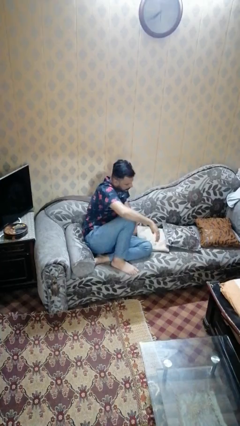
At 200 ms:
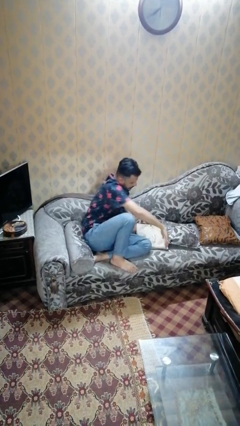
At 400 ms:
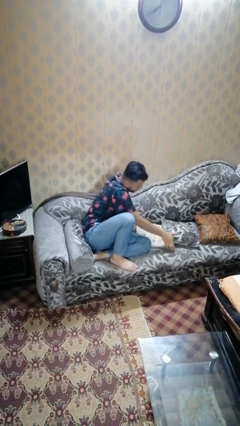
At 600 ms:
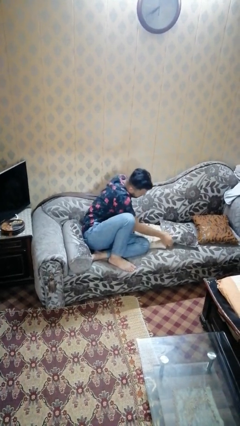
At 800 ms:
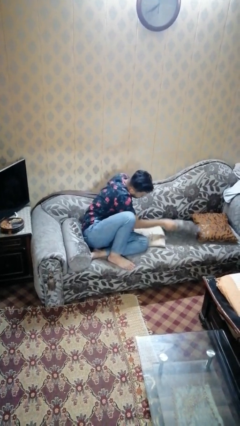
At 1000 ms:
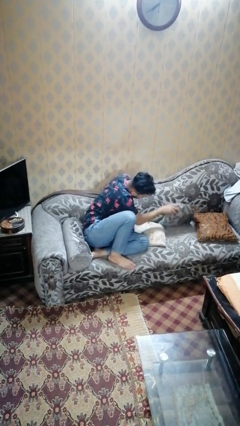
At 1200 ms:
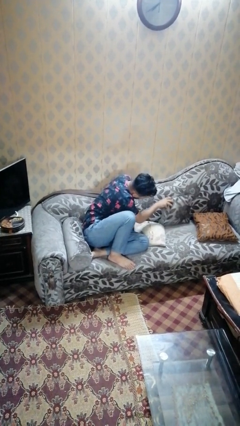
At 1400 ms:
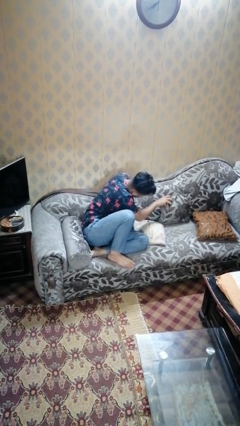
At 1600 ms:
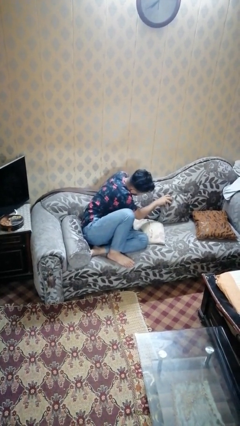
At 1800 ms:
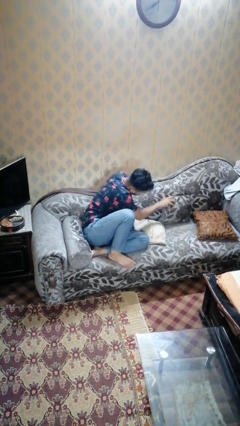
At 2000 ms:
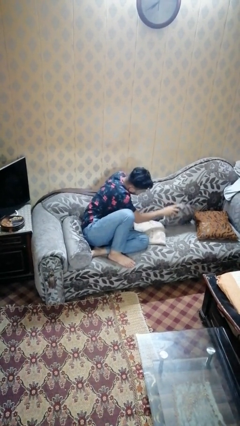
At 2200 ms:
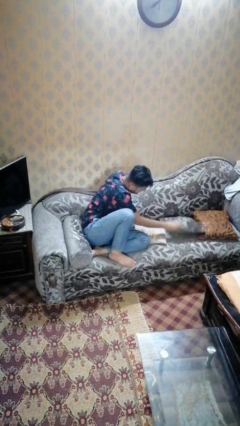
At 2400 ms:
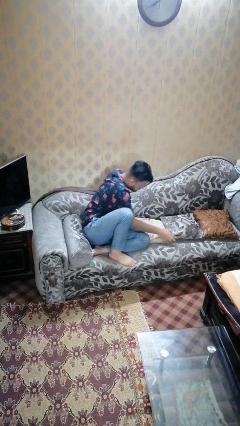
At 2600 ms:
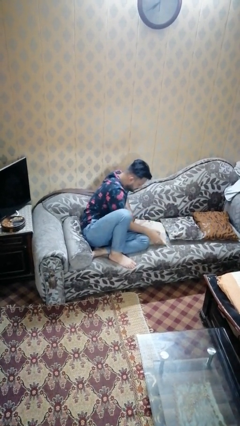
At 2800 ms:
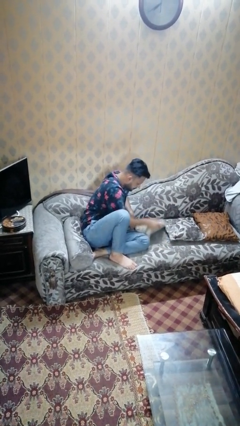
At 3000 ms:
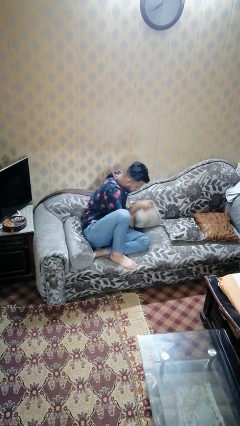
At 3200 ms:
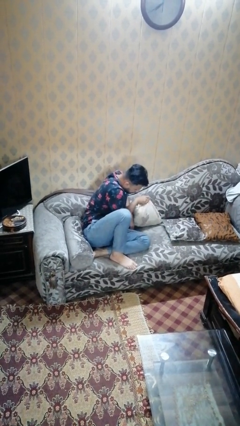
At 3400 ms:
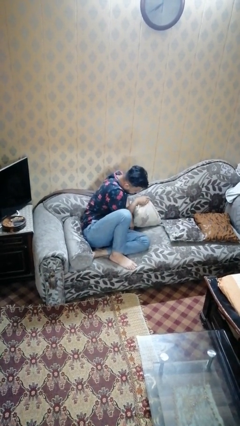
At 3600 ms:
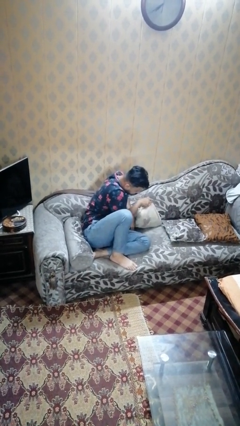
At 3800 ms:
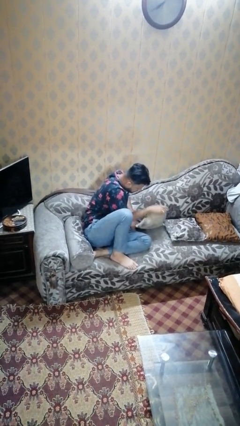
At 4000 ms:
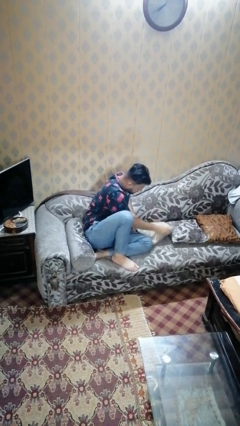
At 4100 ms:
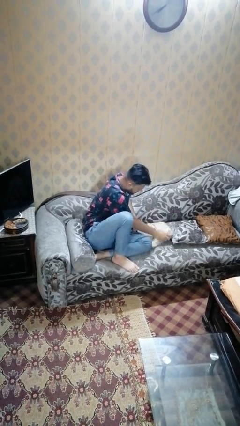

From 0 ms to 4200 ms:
person searches in couch

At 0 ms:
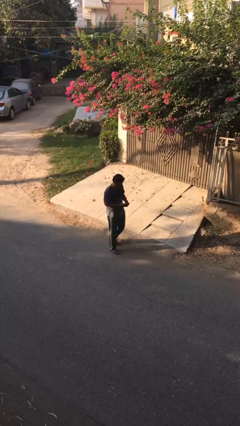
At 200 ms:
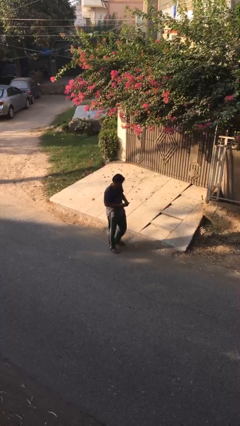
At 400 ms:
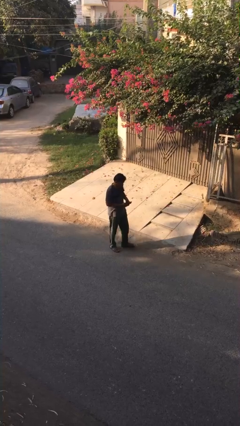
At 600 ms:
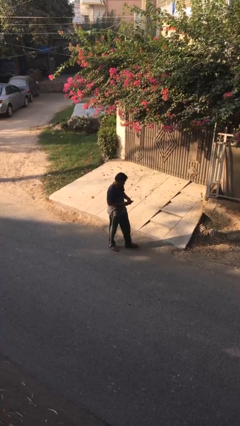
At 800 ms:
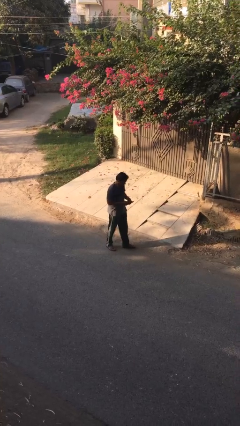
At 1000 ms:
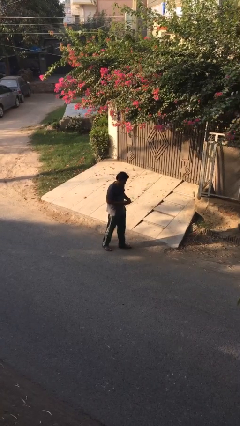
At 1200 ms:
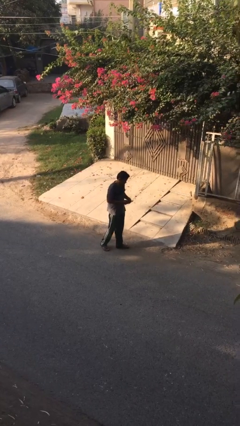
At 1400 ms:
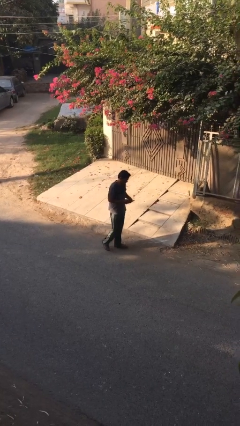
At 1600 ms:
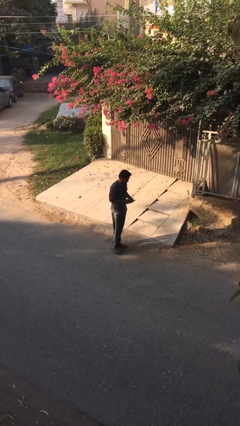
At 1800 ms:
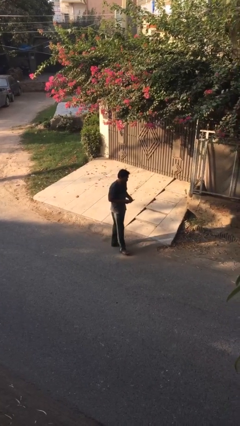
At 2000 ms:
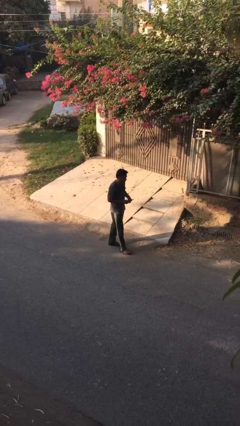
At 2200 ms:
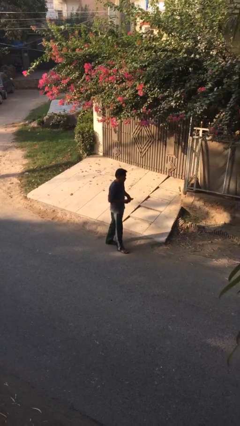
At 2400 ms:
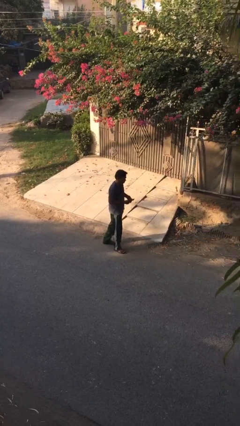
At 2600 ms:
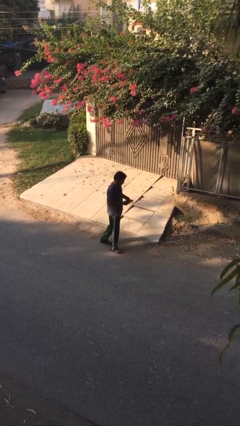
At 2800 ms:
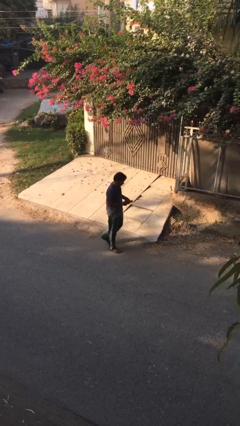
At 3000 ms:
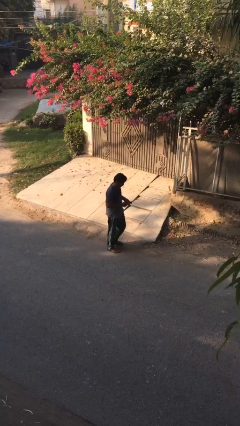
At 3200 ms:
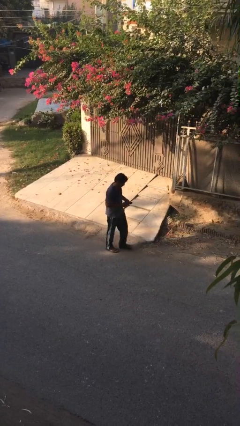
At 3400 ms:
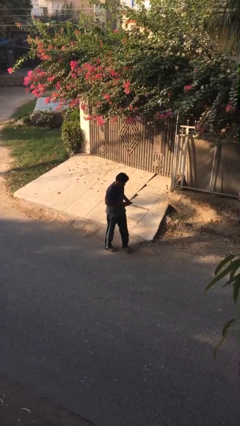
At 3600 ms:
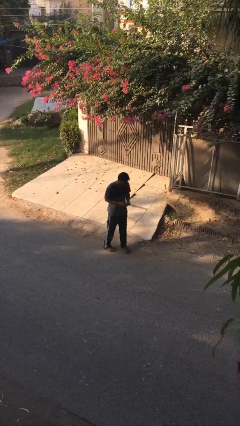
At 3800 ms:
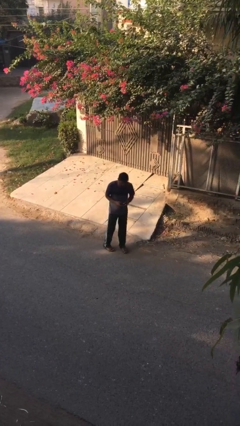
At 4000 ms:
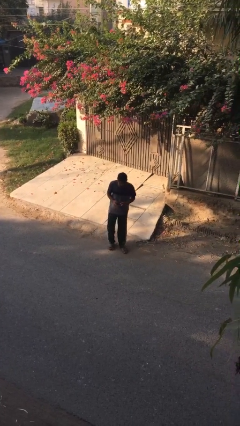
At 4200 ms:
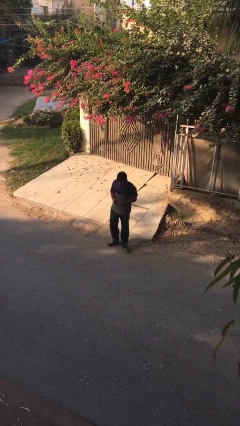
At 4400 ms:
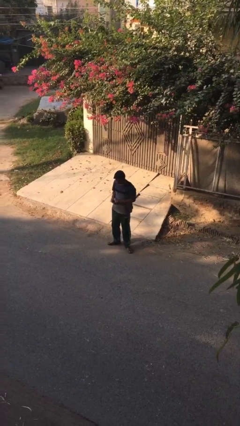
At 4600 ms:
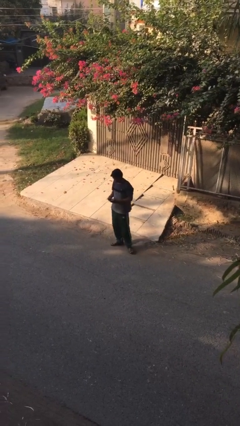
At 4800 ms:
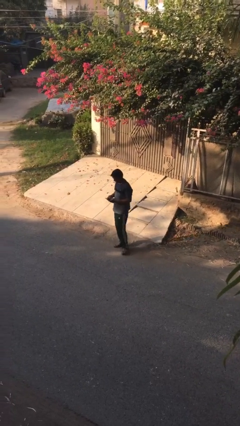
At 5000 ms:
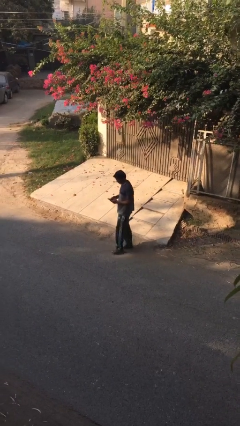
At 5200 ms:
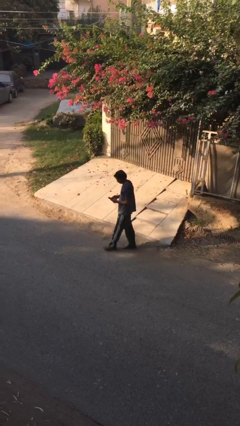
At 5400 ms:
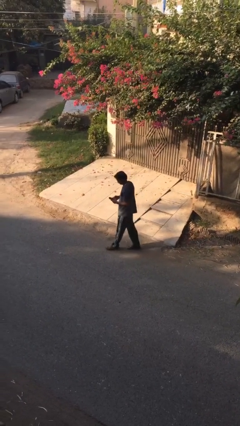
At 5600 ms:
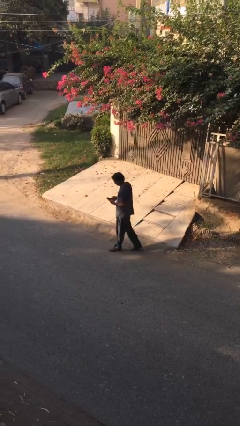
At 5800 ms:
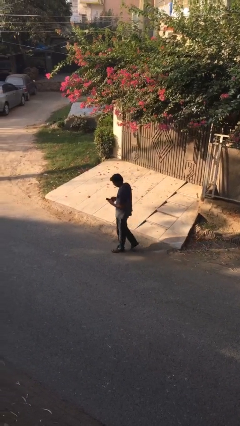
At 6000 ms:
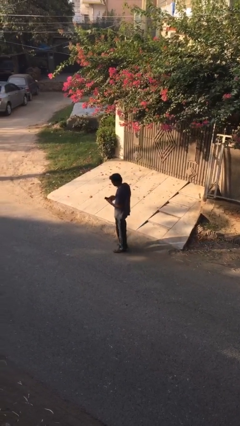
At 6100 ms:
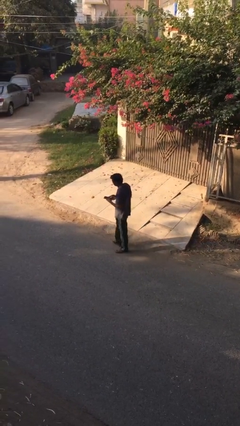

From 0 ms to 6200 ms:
person texts on phone

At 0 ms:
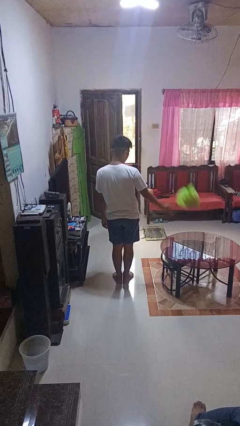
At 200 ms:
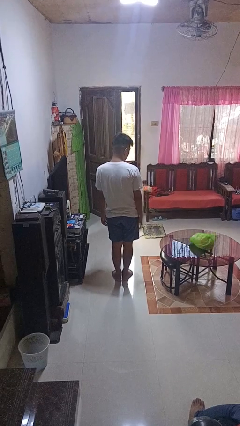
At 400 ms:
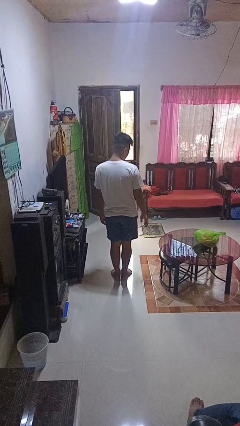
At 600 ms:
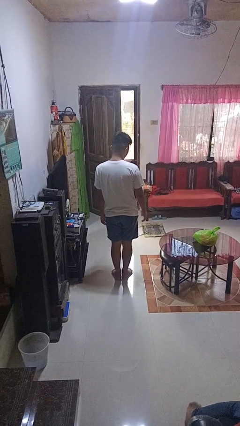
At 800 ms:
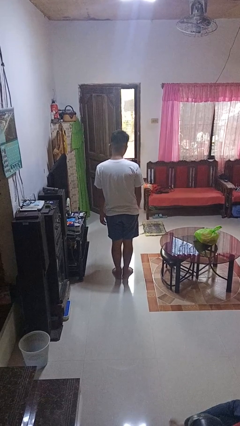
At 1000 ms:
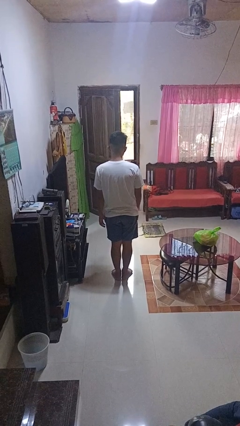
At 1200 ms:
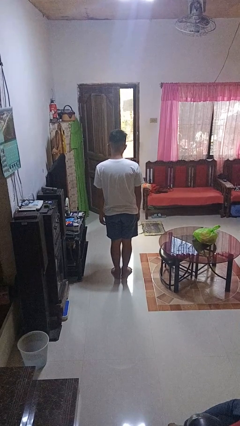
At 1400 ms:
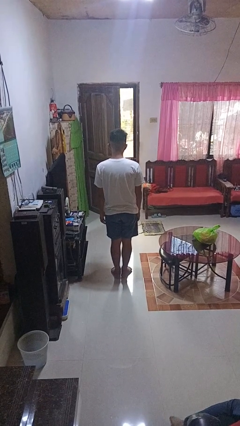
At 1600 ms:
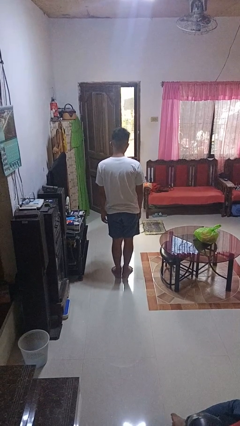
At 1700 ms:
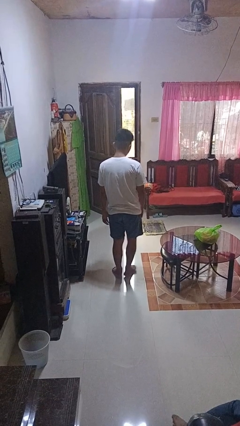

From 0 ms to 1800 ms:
person throws object on table

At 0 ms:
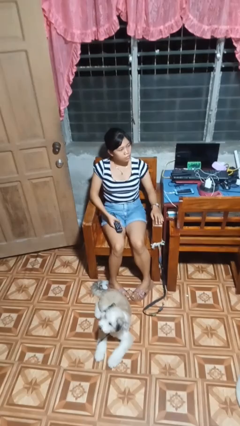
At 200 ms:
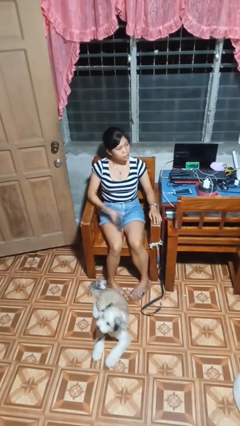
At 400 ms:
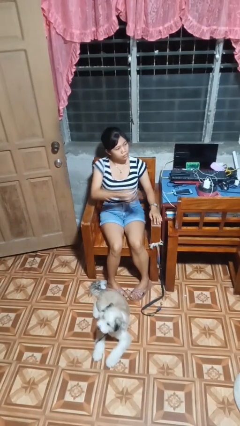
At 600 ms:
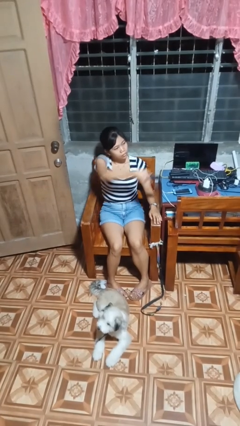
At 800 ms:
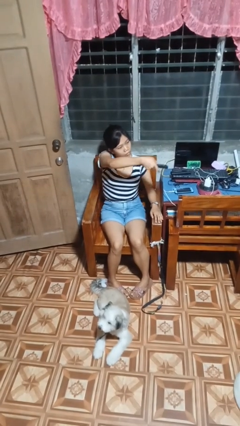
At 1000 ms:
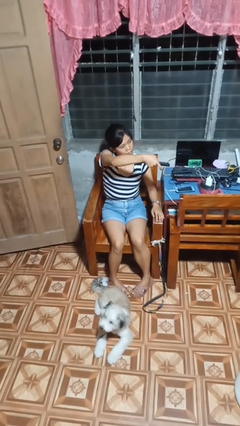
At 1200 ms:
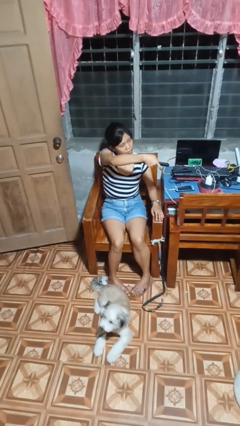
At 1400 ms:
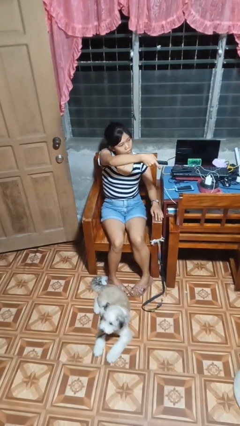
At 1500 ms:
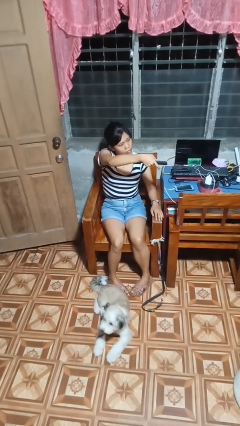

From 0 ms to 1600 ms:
person uses television remote

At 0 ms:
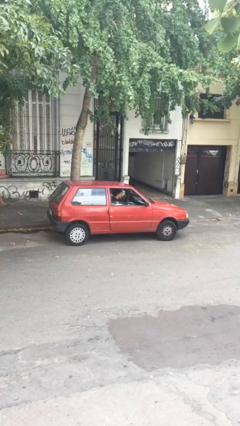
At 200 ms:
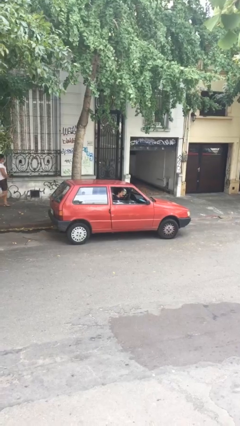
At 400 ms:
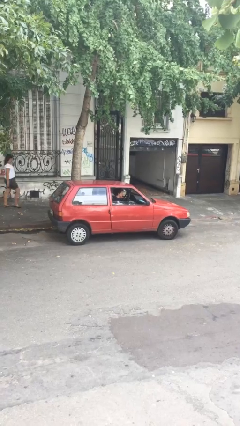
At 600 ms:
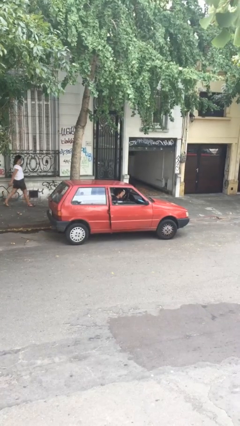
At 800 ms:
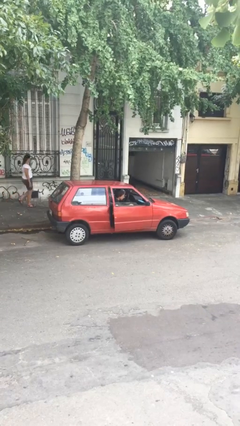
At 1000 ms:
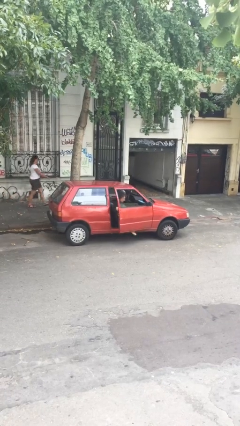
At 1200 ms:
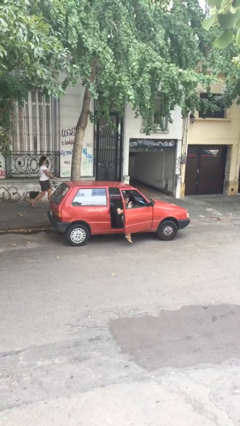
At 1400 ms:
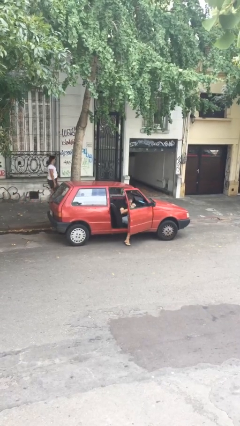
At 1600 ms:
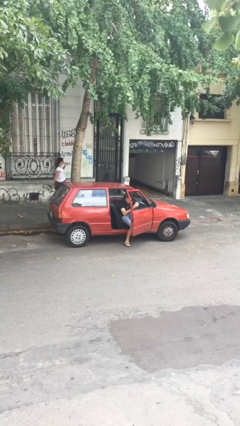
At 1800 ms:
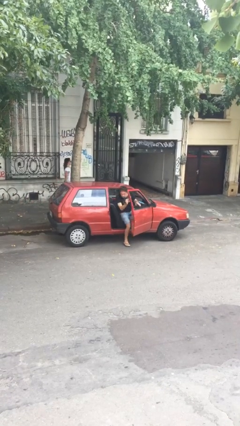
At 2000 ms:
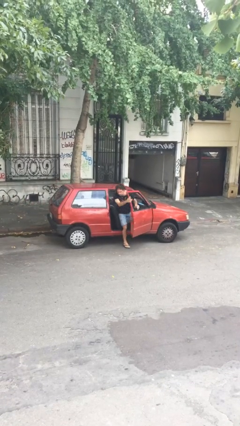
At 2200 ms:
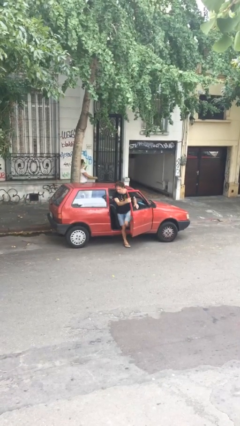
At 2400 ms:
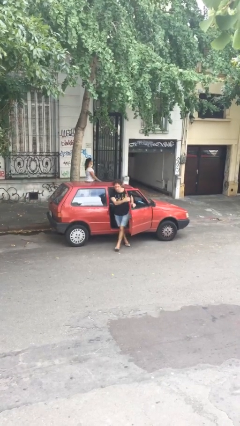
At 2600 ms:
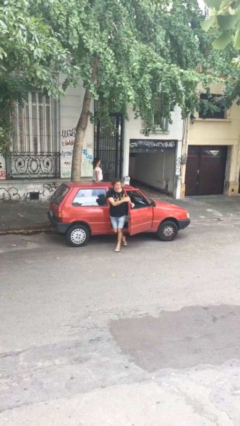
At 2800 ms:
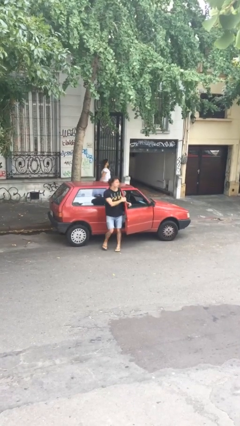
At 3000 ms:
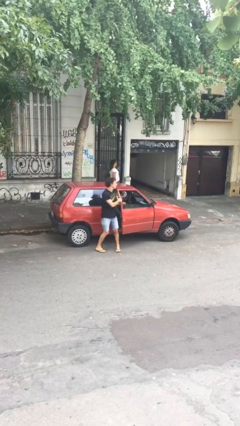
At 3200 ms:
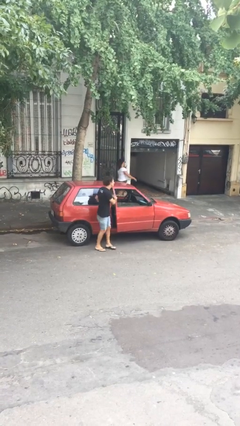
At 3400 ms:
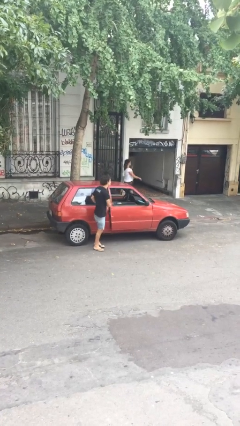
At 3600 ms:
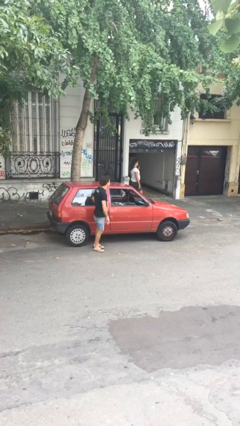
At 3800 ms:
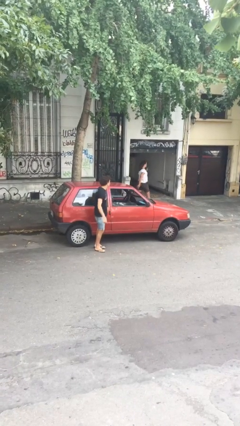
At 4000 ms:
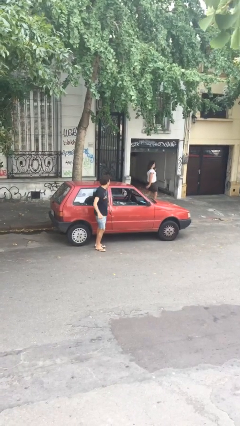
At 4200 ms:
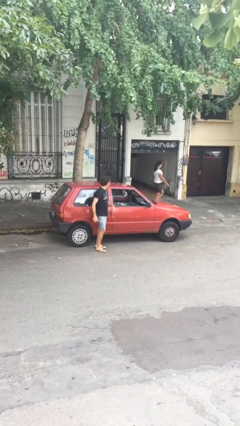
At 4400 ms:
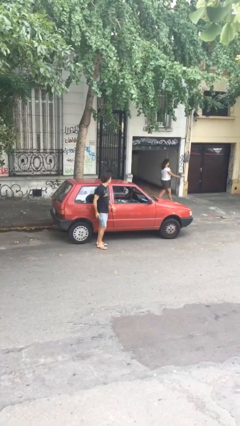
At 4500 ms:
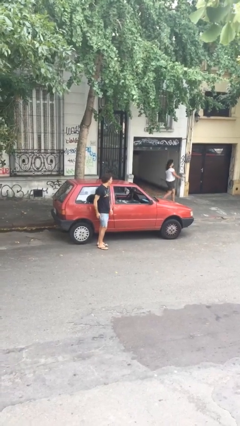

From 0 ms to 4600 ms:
car drops off person
